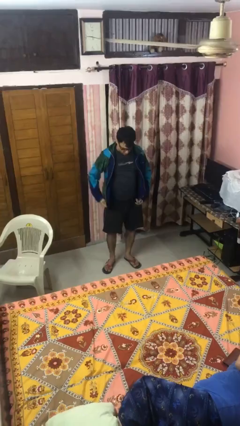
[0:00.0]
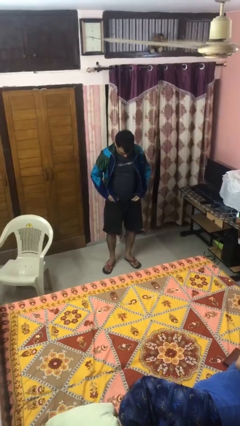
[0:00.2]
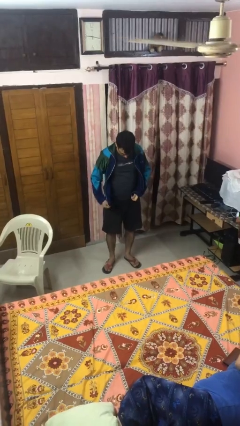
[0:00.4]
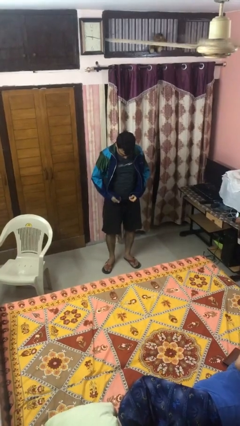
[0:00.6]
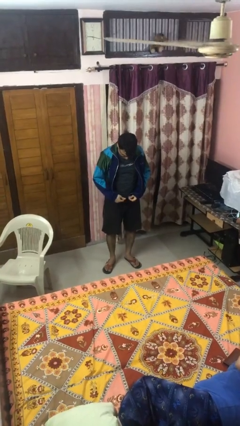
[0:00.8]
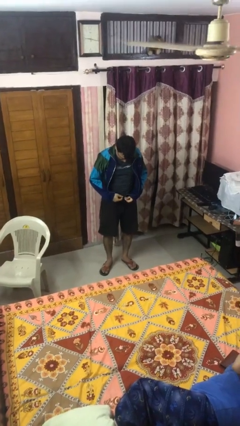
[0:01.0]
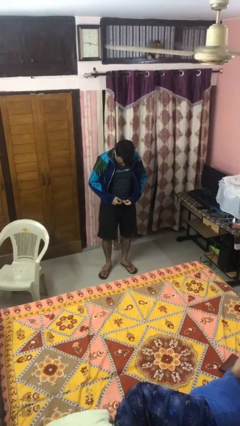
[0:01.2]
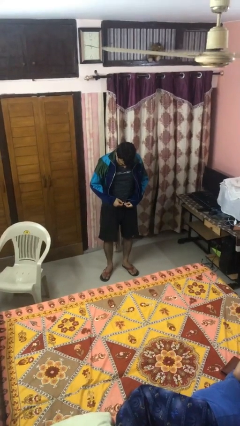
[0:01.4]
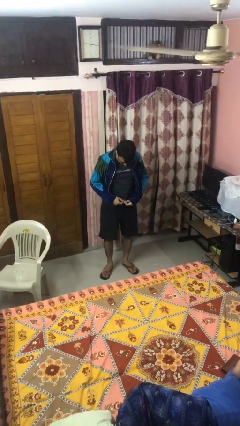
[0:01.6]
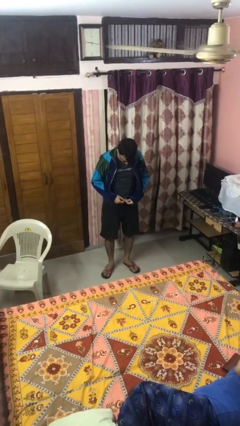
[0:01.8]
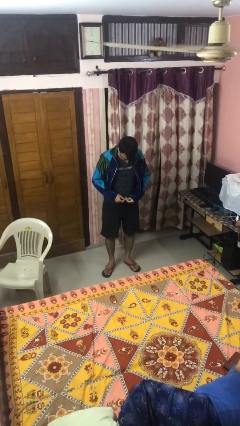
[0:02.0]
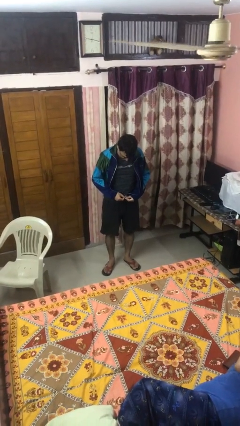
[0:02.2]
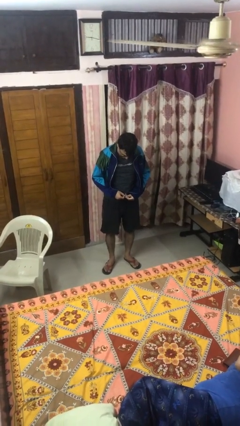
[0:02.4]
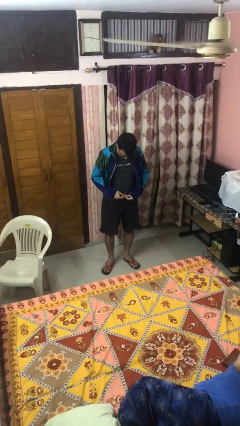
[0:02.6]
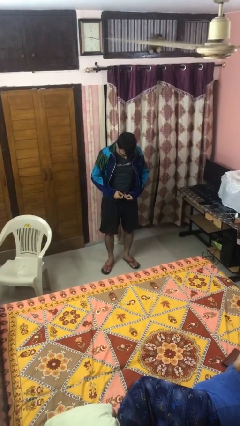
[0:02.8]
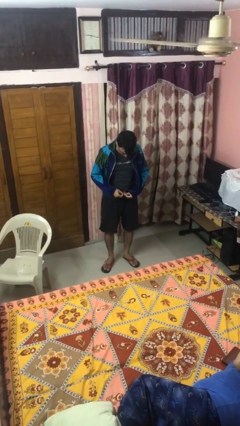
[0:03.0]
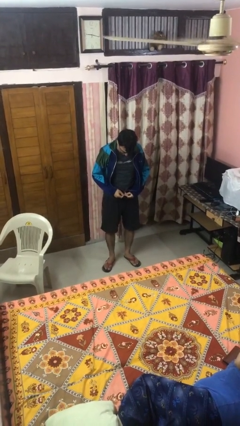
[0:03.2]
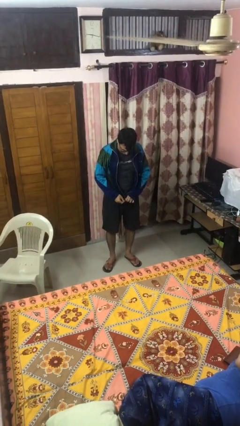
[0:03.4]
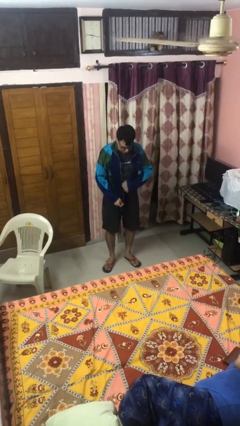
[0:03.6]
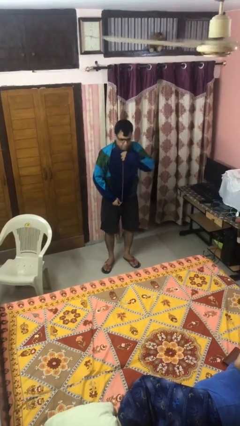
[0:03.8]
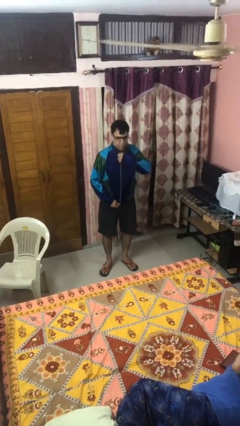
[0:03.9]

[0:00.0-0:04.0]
person zips up jacket

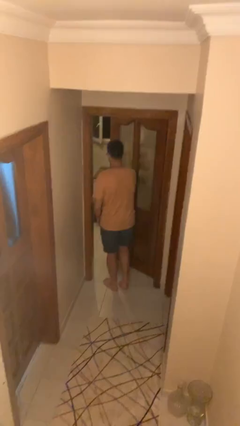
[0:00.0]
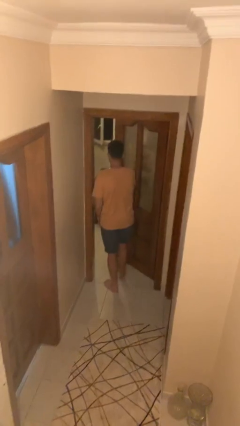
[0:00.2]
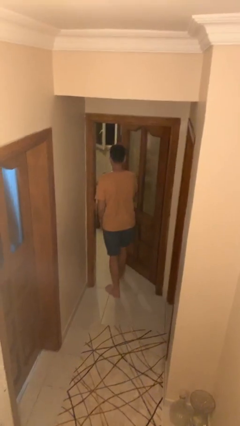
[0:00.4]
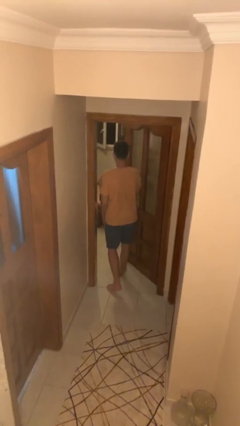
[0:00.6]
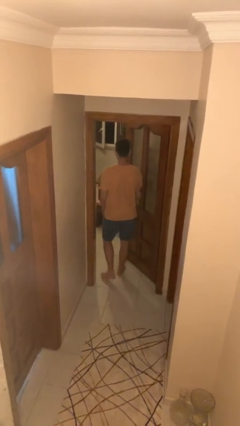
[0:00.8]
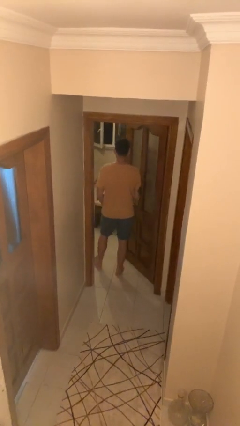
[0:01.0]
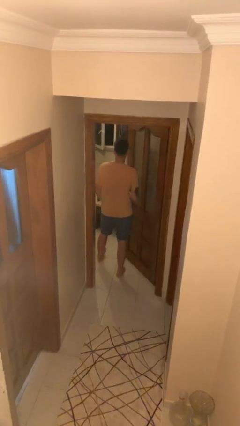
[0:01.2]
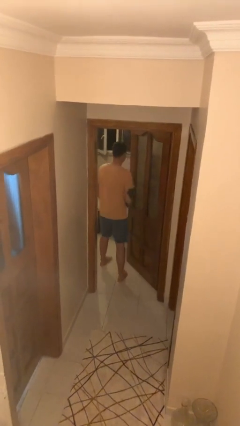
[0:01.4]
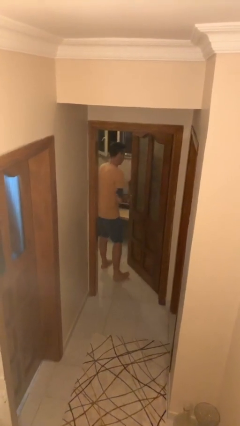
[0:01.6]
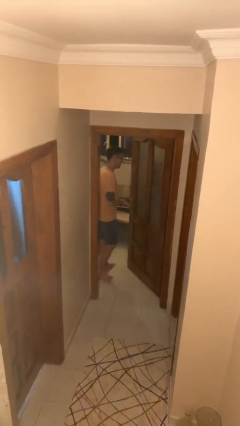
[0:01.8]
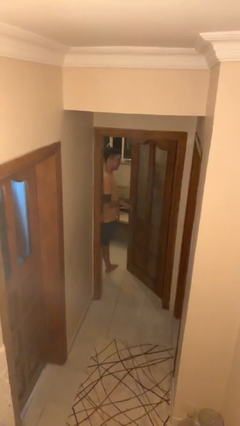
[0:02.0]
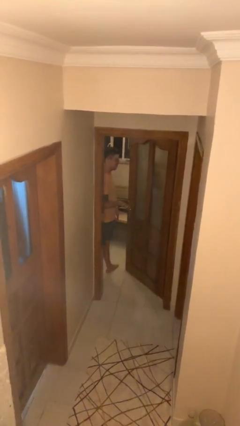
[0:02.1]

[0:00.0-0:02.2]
person exits scene through structure

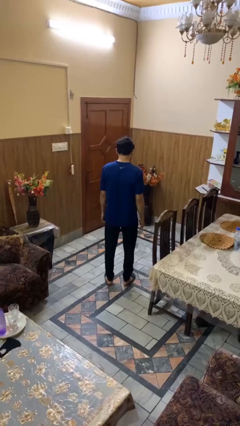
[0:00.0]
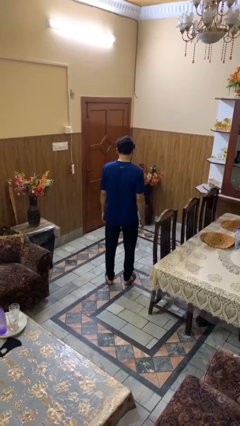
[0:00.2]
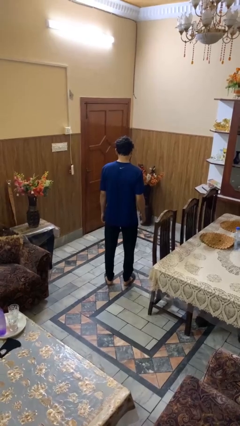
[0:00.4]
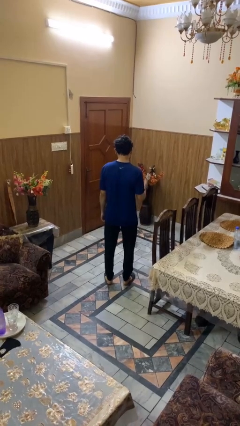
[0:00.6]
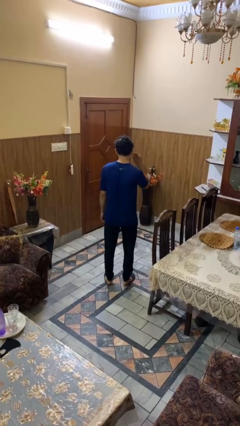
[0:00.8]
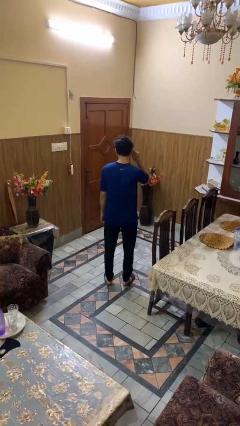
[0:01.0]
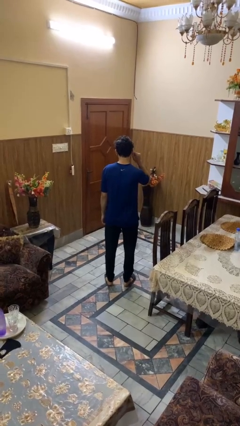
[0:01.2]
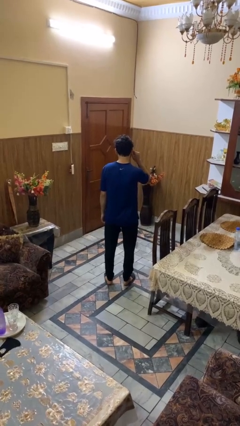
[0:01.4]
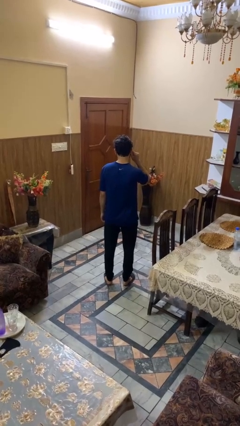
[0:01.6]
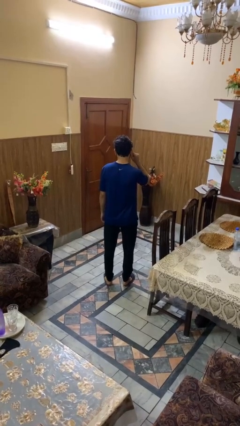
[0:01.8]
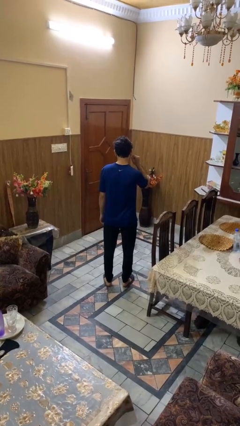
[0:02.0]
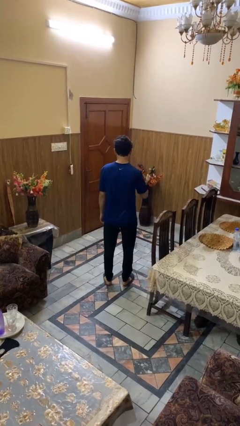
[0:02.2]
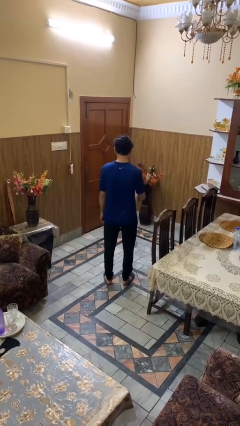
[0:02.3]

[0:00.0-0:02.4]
person touches earlobe

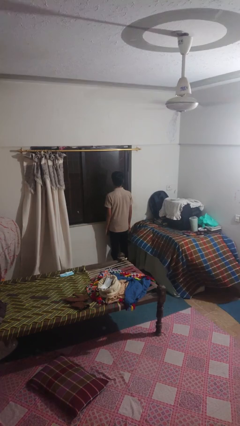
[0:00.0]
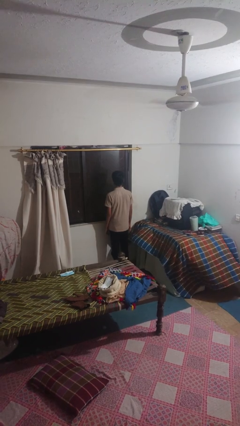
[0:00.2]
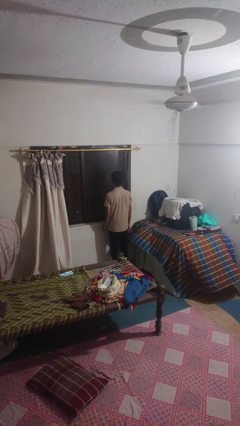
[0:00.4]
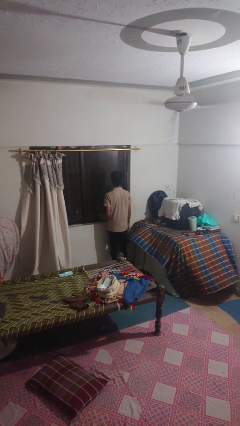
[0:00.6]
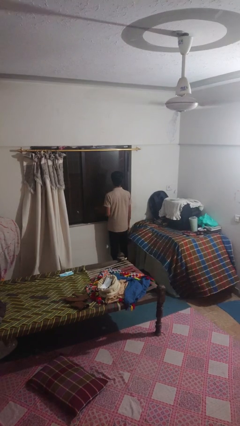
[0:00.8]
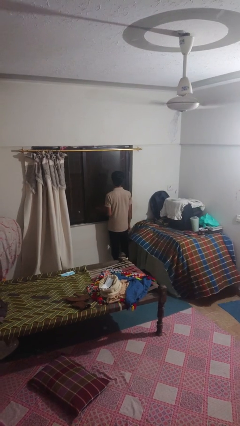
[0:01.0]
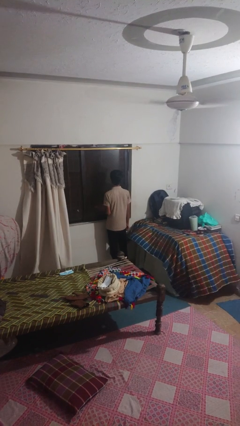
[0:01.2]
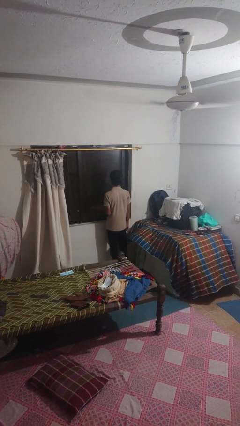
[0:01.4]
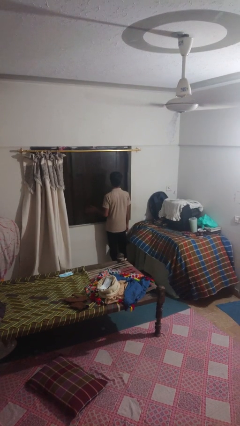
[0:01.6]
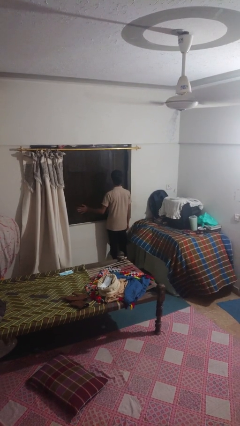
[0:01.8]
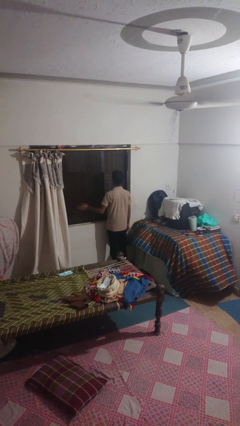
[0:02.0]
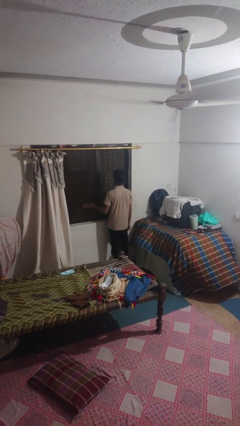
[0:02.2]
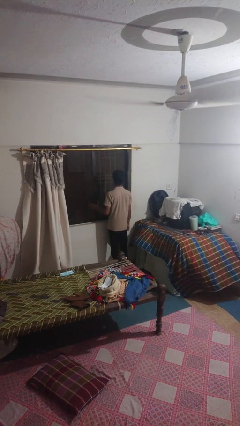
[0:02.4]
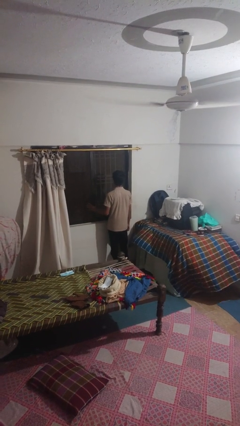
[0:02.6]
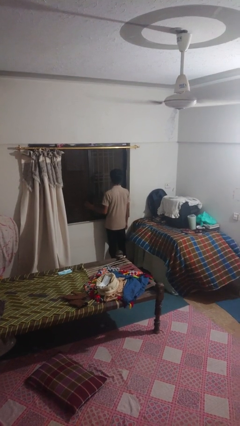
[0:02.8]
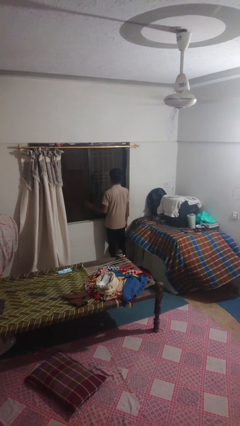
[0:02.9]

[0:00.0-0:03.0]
person opens sliding door

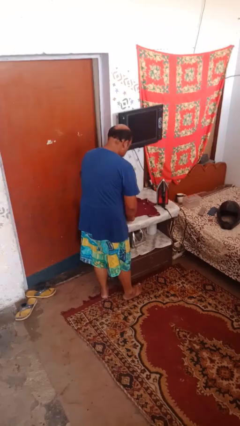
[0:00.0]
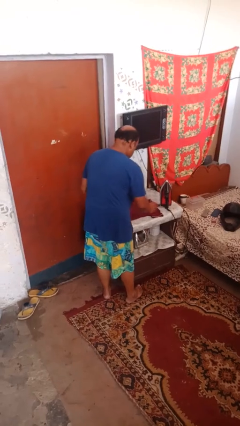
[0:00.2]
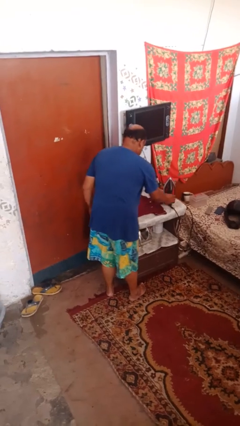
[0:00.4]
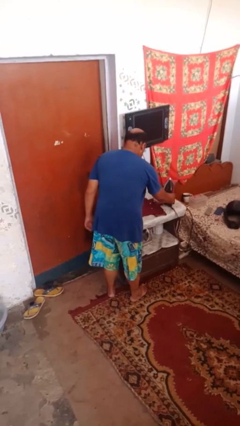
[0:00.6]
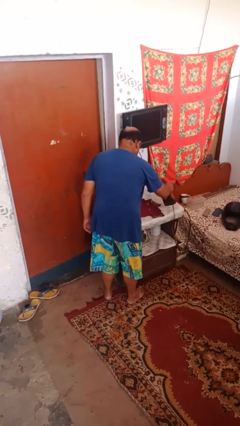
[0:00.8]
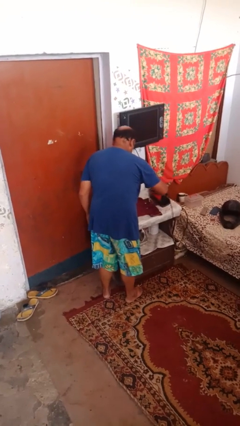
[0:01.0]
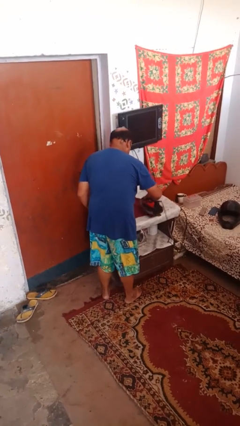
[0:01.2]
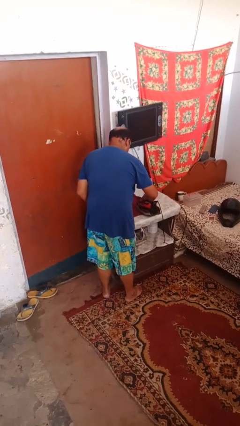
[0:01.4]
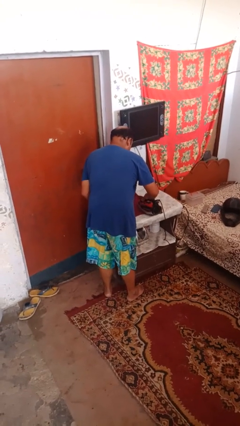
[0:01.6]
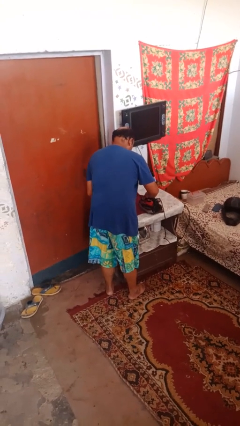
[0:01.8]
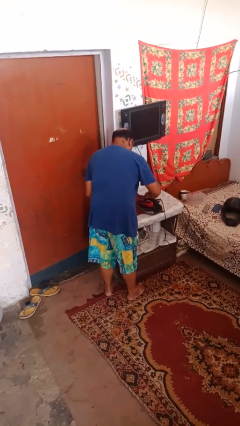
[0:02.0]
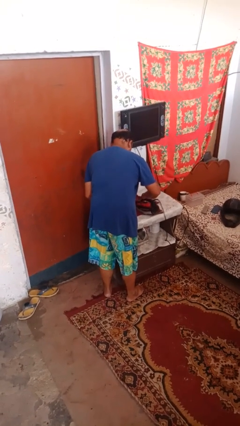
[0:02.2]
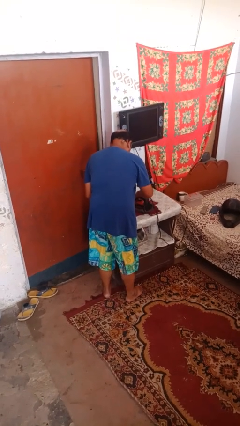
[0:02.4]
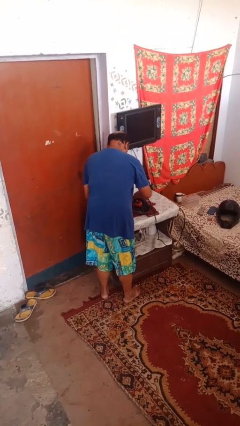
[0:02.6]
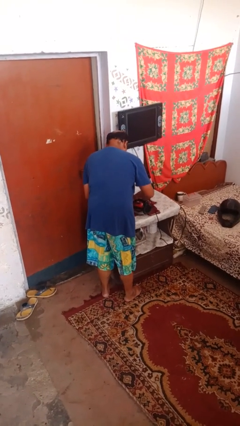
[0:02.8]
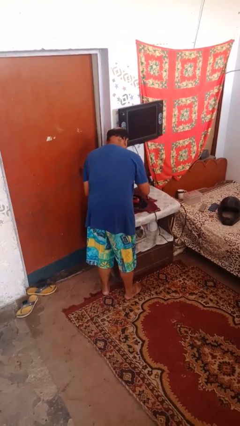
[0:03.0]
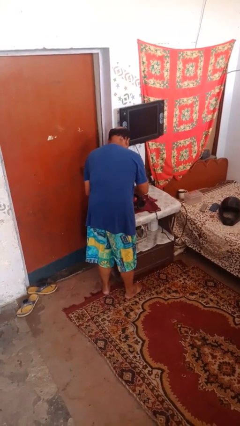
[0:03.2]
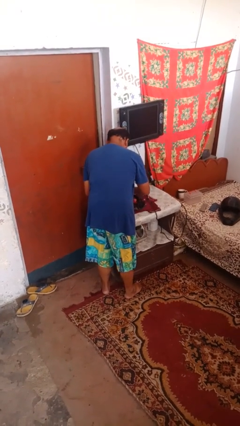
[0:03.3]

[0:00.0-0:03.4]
person irons clothes

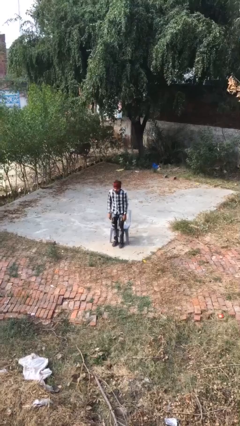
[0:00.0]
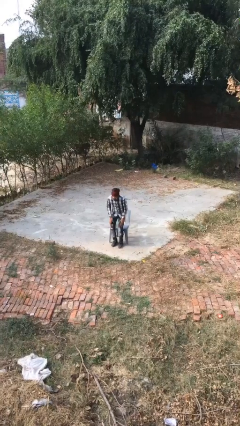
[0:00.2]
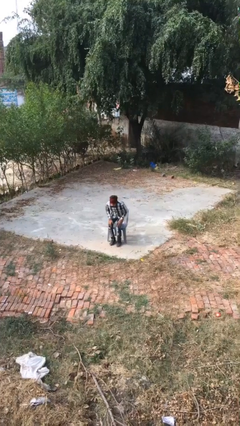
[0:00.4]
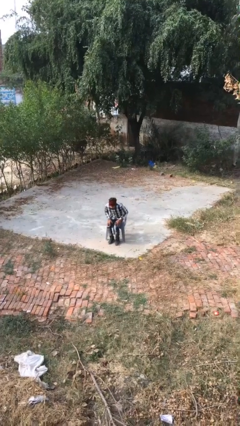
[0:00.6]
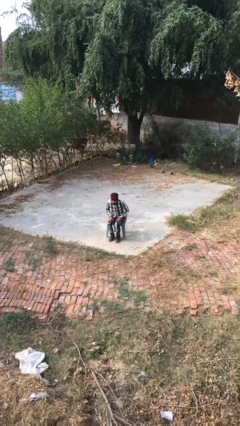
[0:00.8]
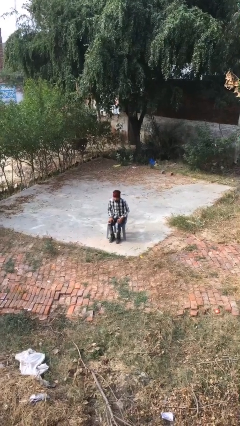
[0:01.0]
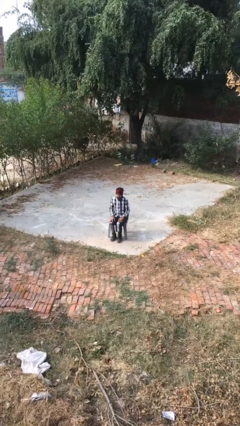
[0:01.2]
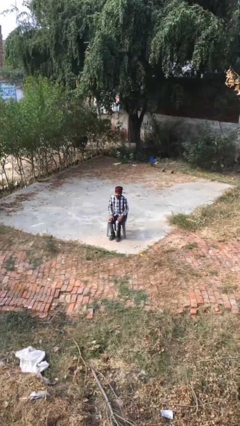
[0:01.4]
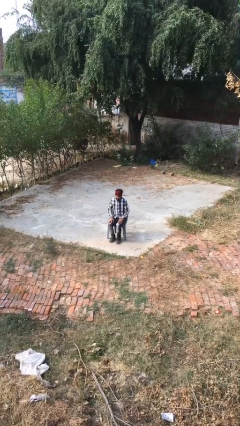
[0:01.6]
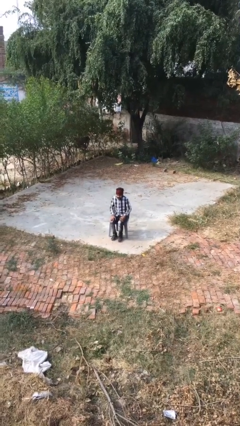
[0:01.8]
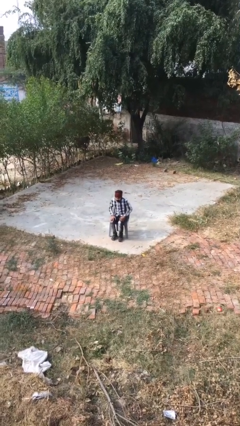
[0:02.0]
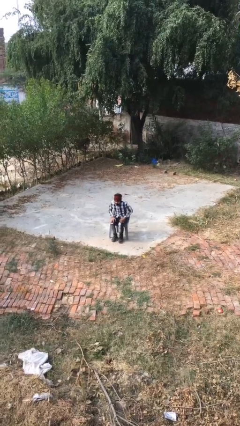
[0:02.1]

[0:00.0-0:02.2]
person sits down

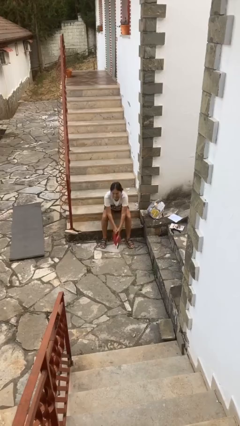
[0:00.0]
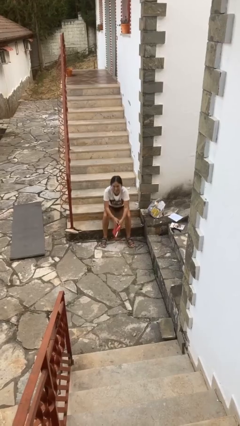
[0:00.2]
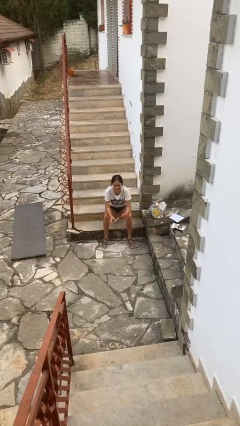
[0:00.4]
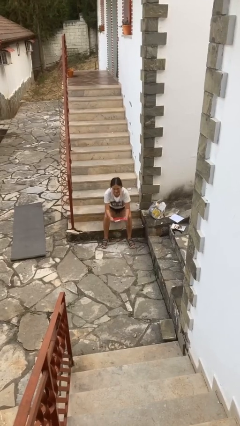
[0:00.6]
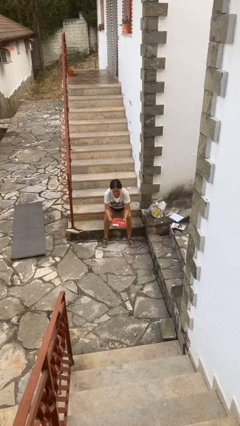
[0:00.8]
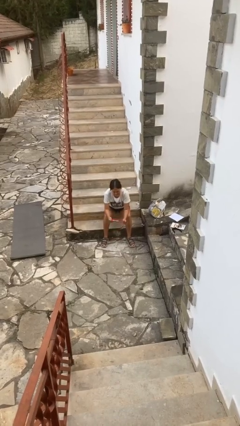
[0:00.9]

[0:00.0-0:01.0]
person picks up object from floor
